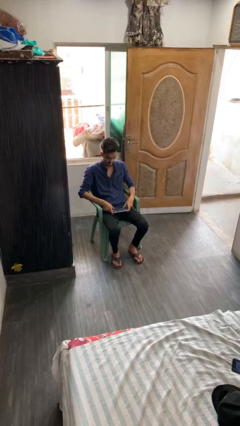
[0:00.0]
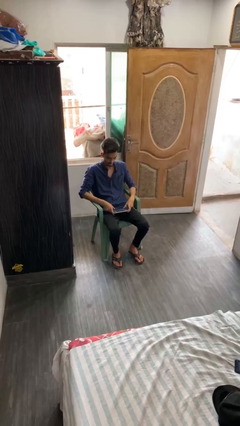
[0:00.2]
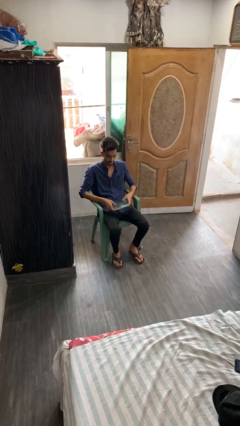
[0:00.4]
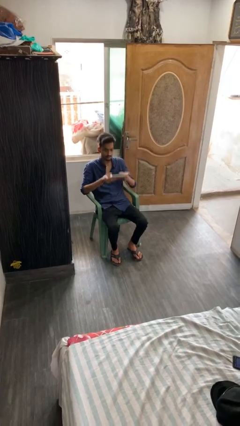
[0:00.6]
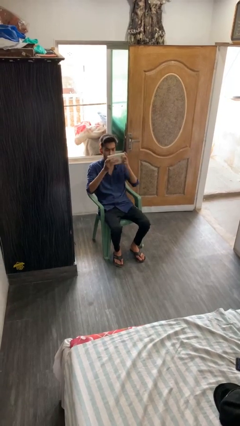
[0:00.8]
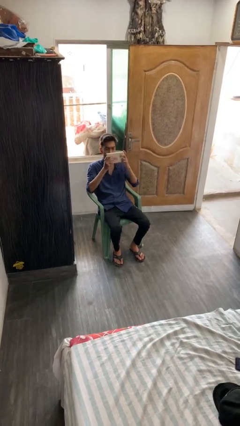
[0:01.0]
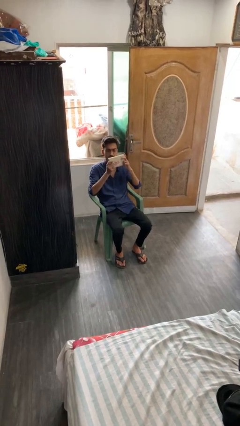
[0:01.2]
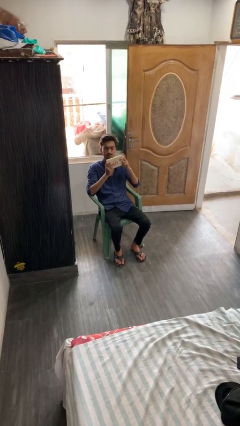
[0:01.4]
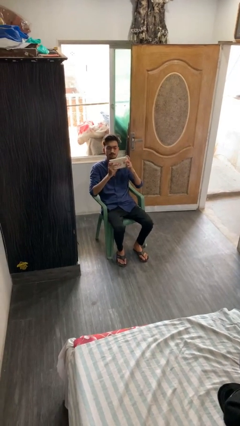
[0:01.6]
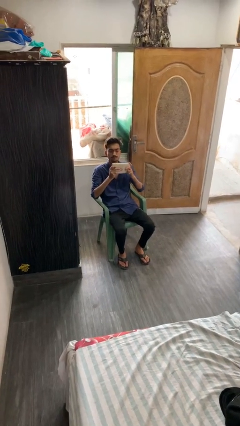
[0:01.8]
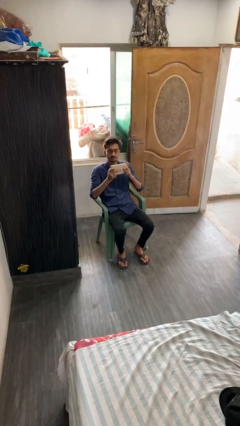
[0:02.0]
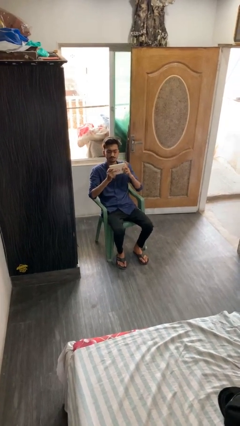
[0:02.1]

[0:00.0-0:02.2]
person interacts with tablet

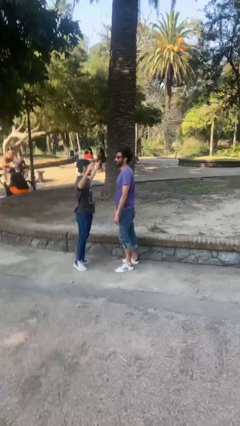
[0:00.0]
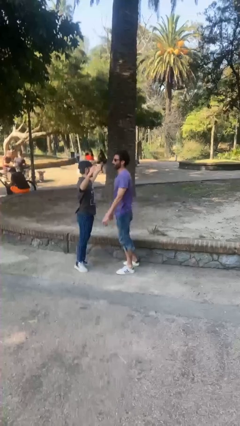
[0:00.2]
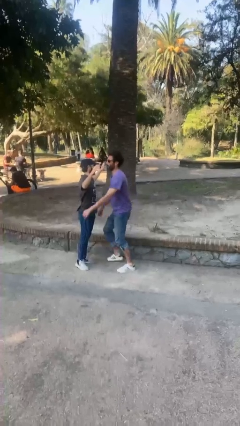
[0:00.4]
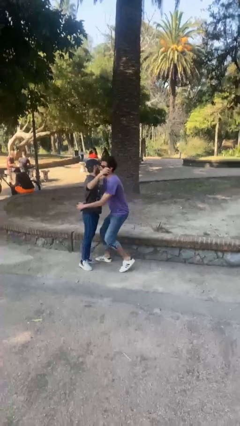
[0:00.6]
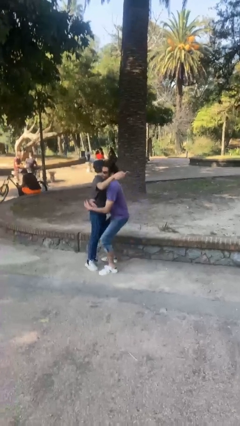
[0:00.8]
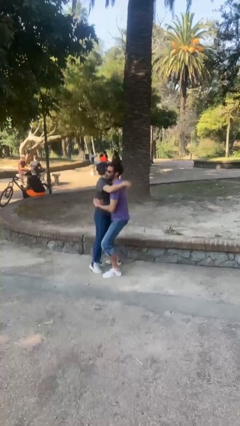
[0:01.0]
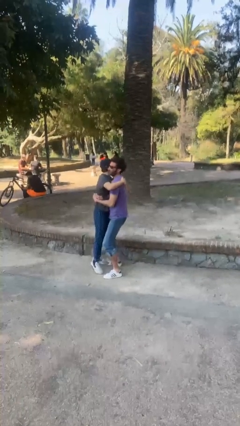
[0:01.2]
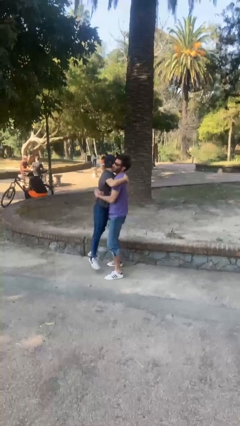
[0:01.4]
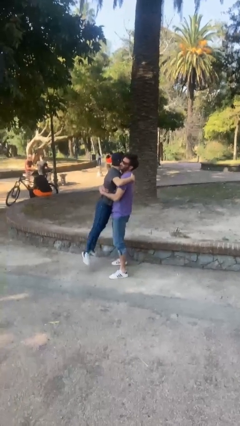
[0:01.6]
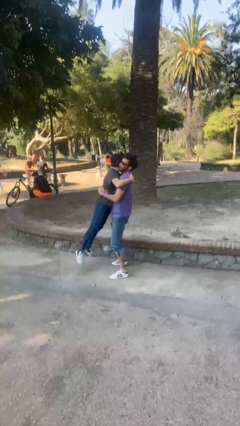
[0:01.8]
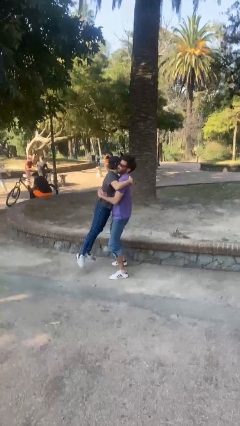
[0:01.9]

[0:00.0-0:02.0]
person picks up person

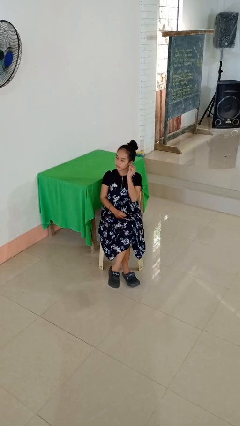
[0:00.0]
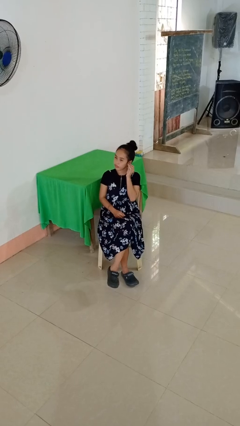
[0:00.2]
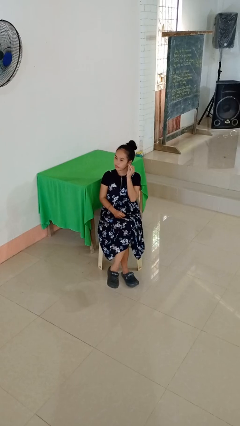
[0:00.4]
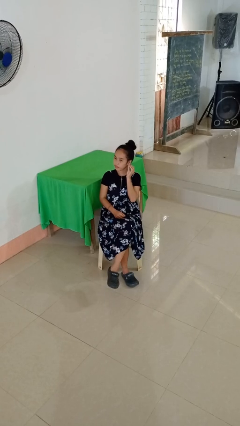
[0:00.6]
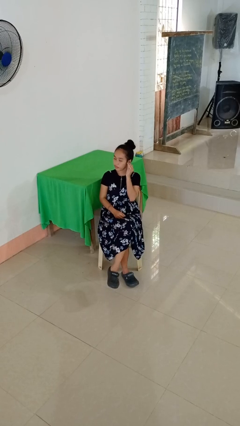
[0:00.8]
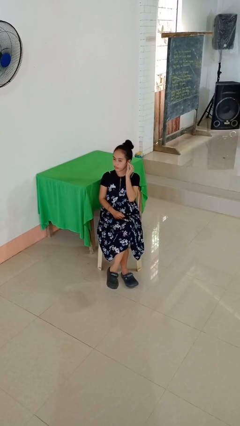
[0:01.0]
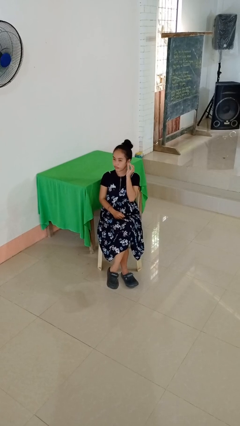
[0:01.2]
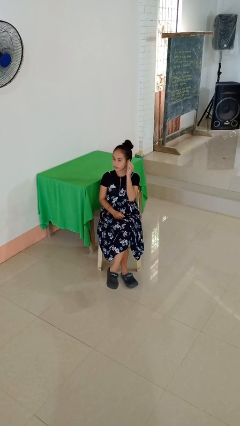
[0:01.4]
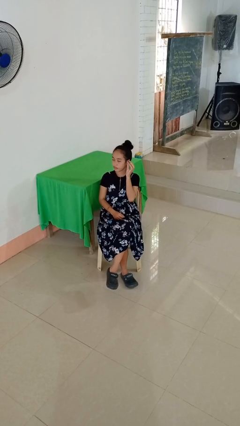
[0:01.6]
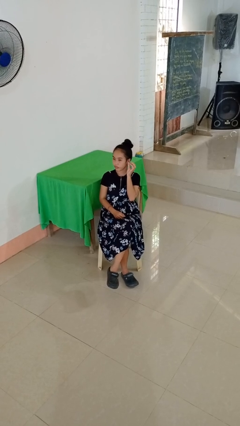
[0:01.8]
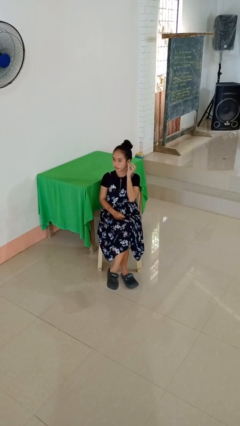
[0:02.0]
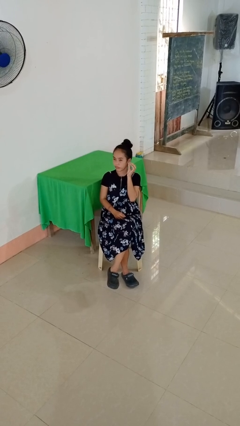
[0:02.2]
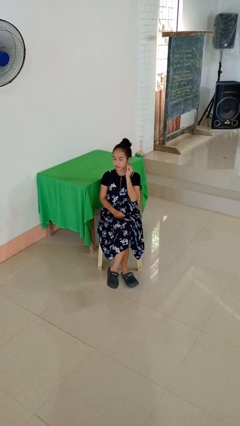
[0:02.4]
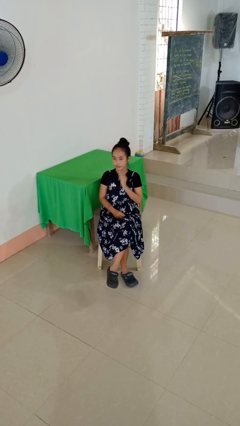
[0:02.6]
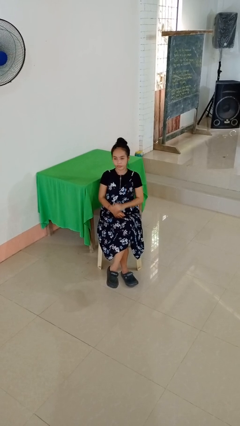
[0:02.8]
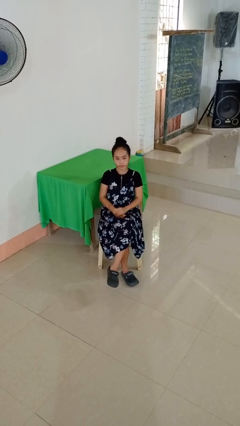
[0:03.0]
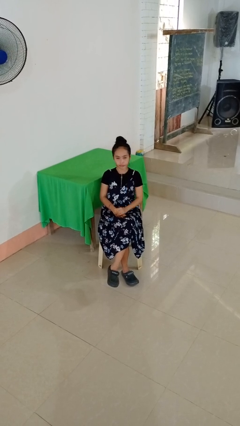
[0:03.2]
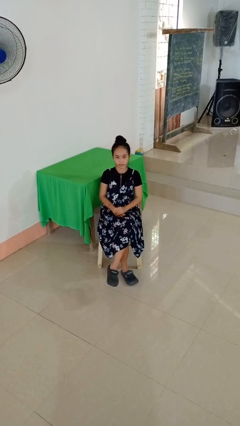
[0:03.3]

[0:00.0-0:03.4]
person touches earlobe

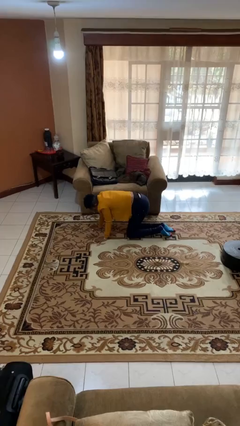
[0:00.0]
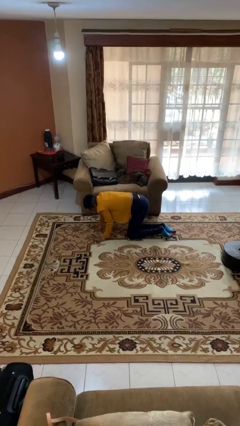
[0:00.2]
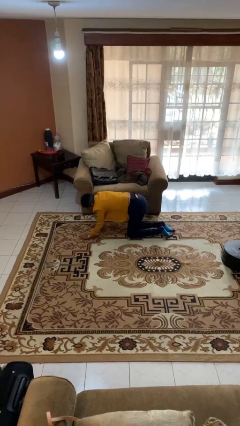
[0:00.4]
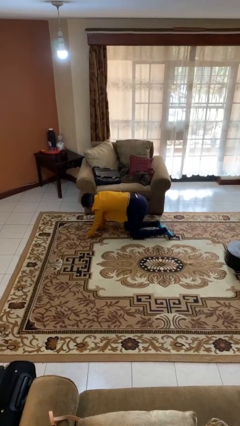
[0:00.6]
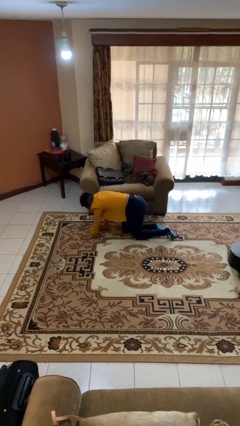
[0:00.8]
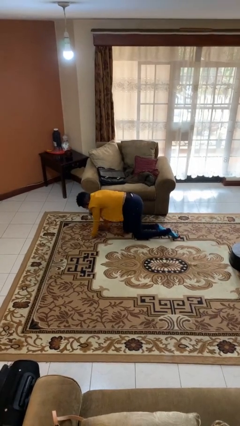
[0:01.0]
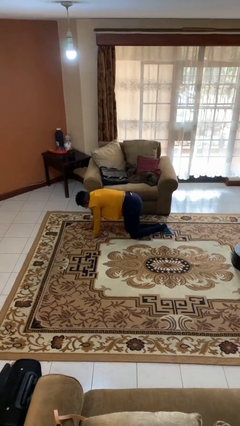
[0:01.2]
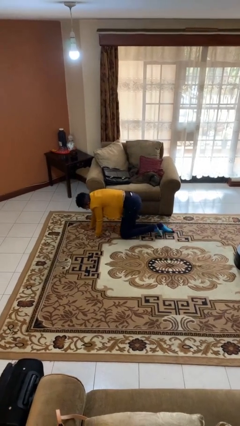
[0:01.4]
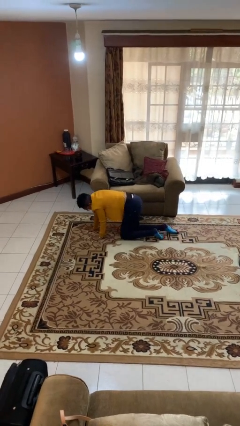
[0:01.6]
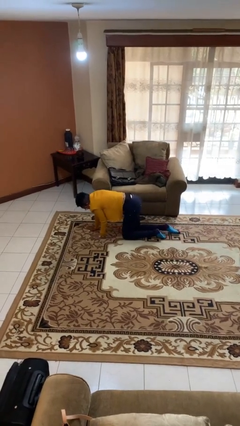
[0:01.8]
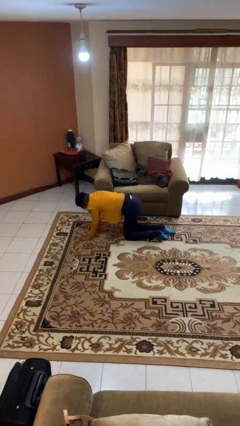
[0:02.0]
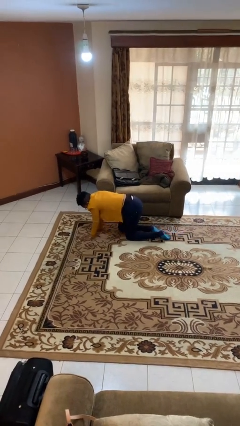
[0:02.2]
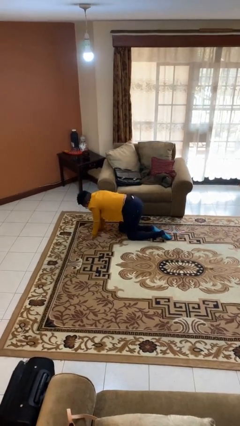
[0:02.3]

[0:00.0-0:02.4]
person crawls

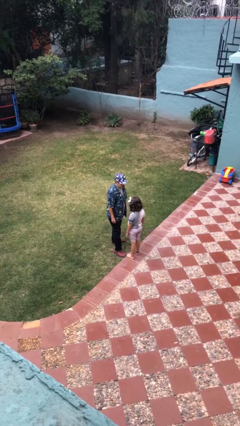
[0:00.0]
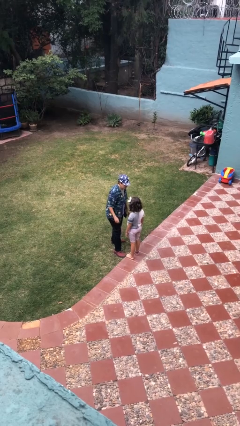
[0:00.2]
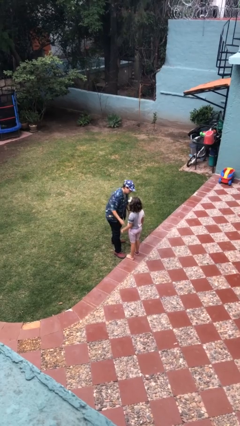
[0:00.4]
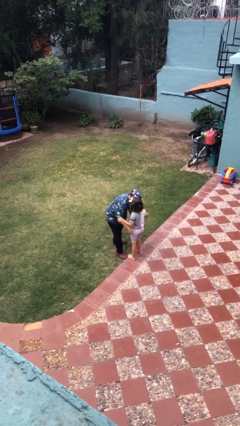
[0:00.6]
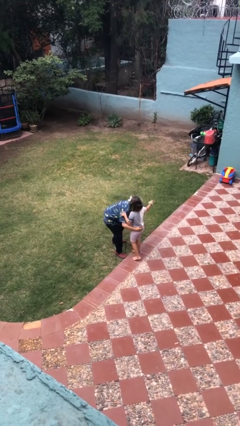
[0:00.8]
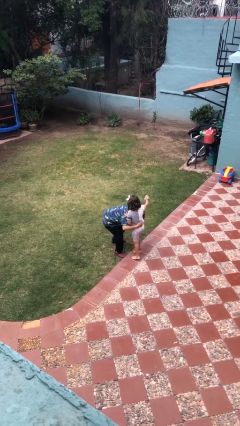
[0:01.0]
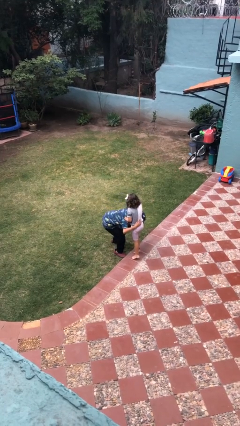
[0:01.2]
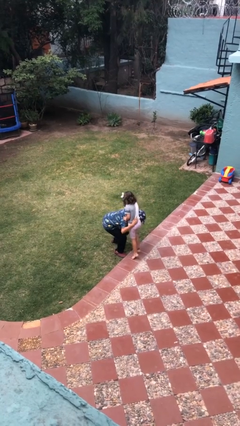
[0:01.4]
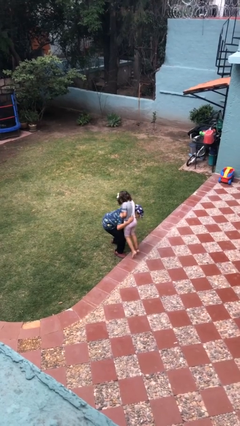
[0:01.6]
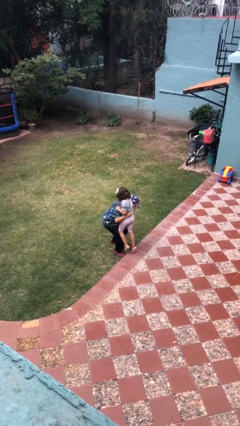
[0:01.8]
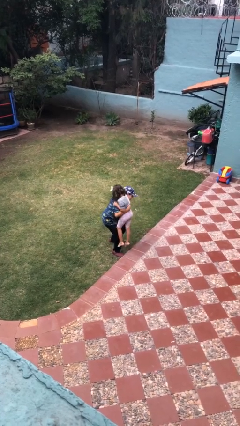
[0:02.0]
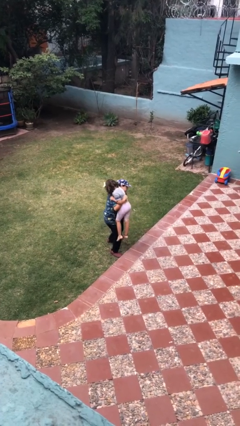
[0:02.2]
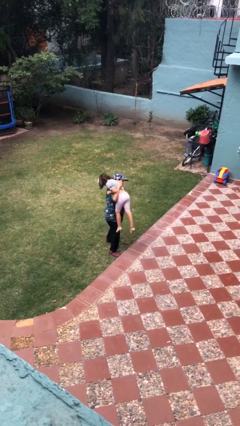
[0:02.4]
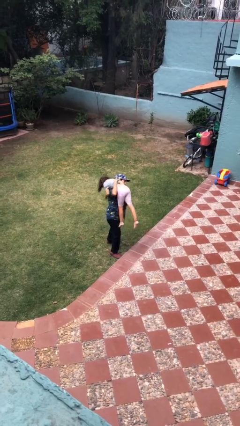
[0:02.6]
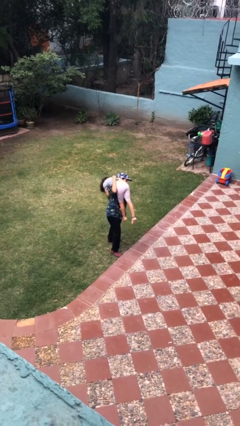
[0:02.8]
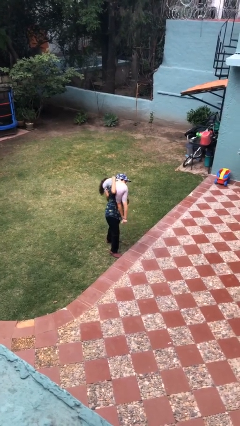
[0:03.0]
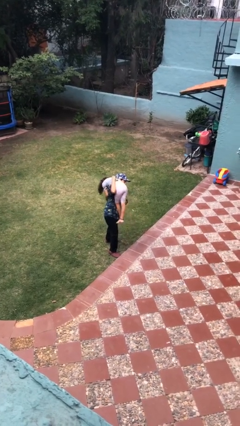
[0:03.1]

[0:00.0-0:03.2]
person carries person over shoulder

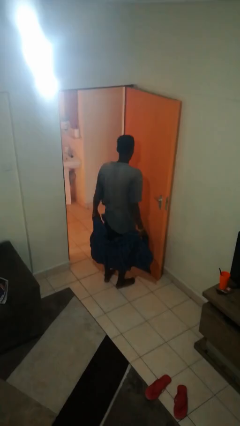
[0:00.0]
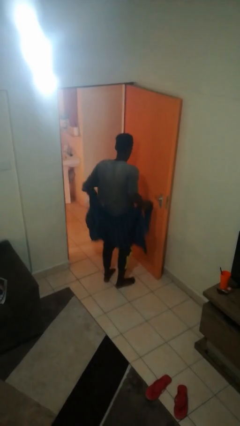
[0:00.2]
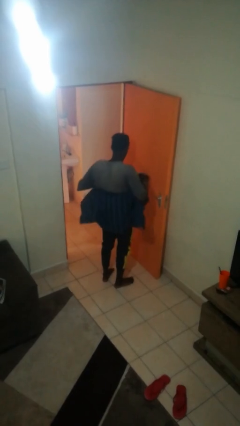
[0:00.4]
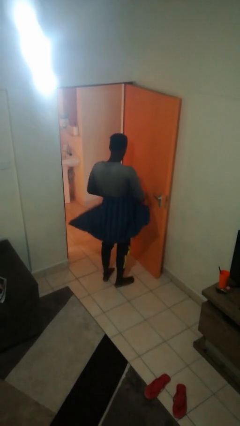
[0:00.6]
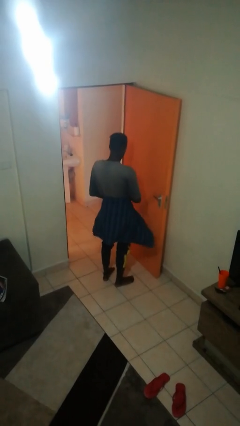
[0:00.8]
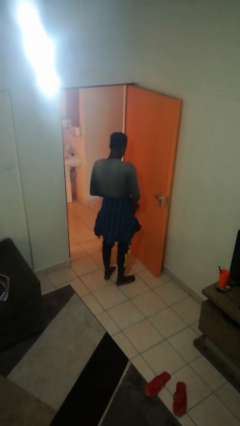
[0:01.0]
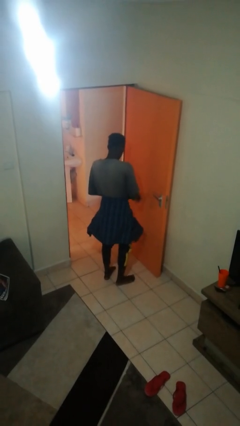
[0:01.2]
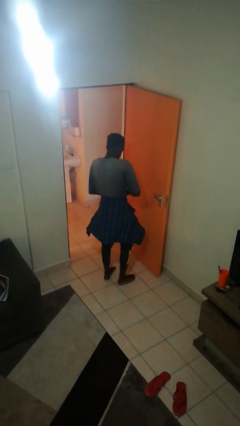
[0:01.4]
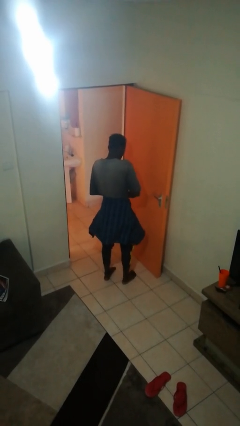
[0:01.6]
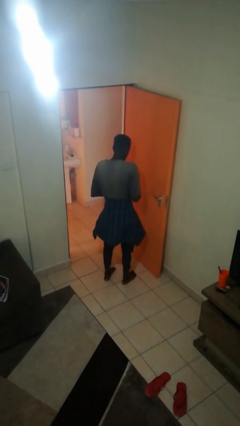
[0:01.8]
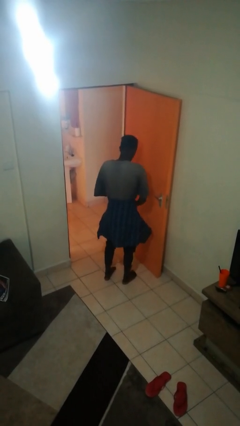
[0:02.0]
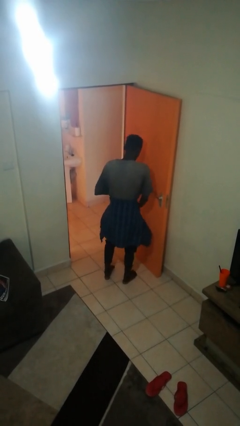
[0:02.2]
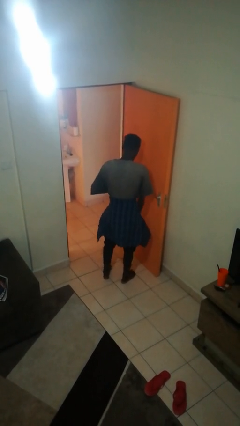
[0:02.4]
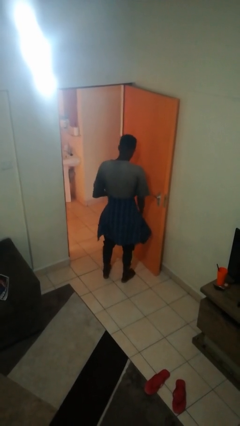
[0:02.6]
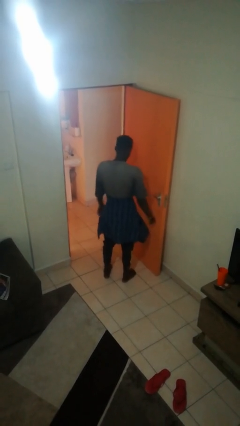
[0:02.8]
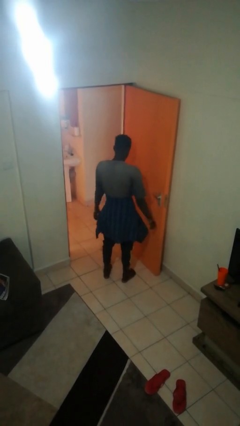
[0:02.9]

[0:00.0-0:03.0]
person ties jacket around waist

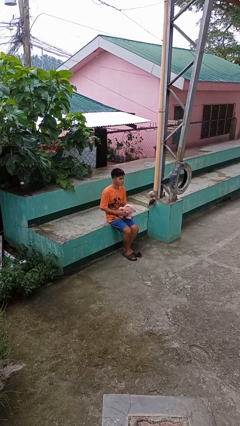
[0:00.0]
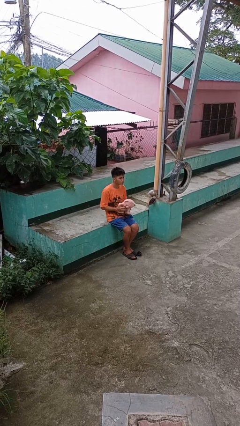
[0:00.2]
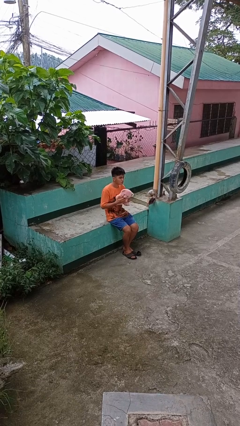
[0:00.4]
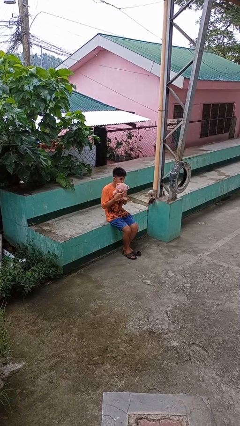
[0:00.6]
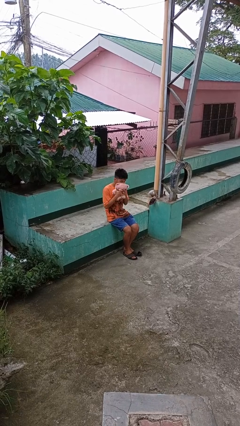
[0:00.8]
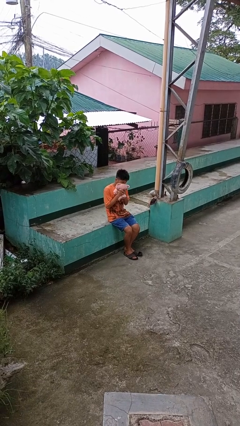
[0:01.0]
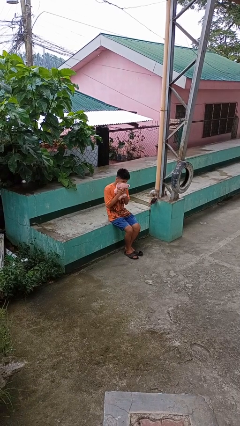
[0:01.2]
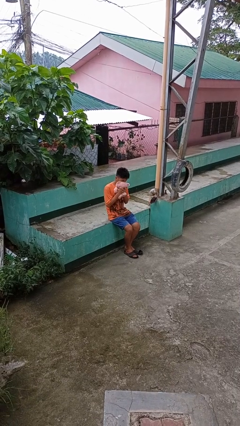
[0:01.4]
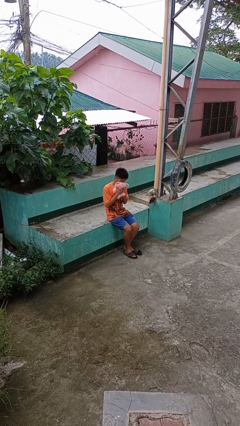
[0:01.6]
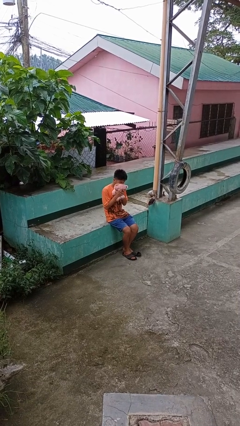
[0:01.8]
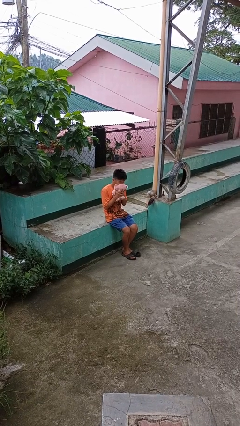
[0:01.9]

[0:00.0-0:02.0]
person hugs stuffed animal
